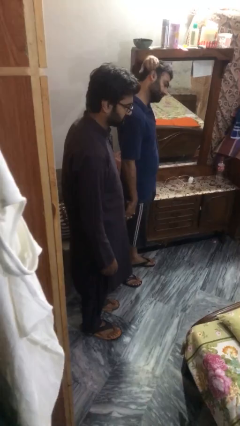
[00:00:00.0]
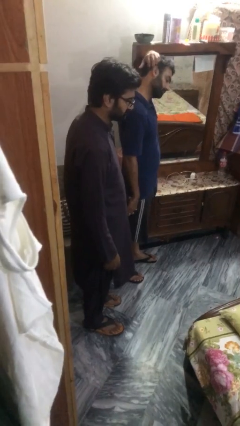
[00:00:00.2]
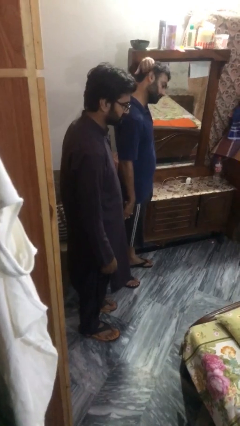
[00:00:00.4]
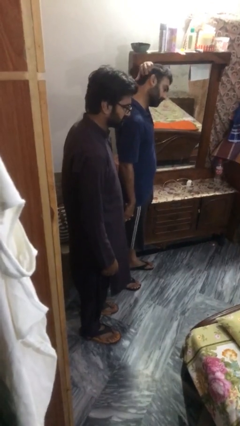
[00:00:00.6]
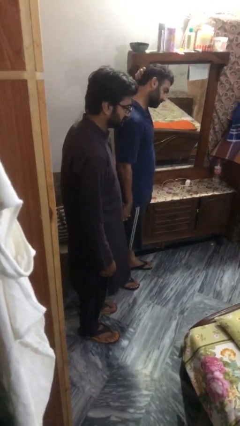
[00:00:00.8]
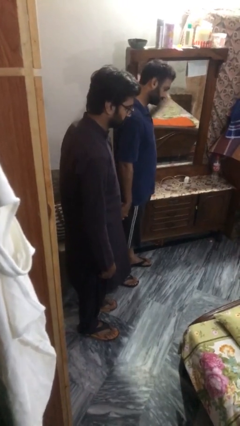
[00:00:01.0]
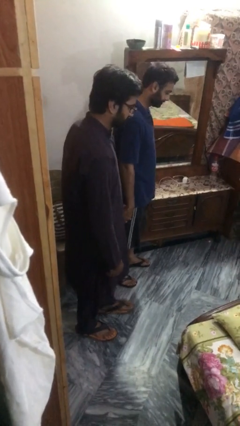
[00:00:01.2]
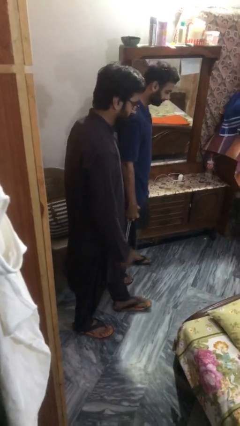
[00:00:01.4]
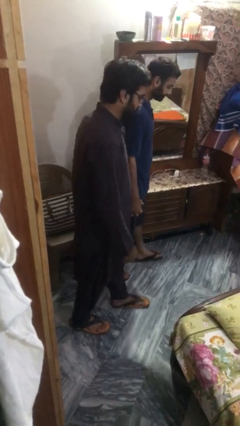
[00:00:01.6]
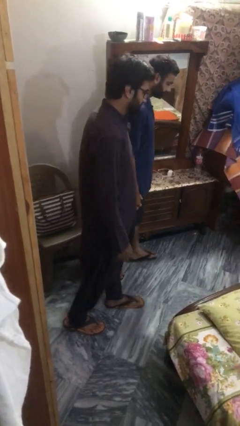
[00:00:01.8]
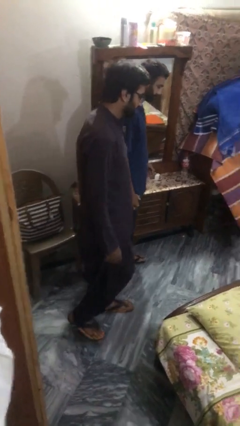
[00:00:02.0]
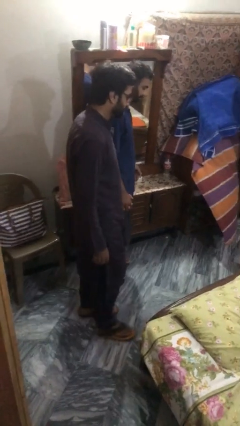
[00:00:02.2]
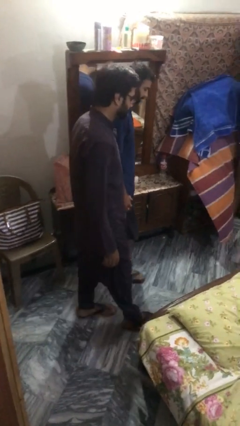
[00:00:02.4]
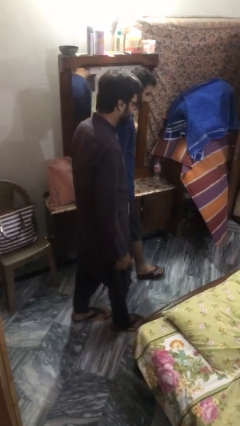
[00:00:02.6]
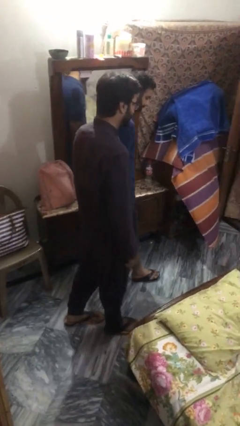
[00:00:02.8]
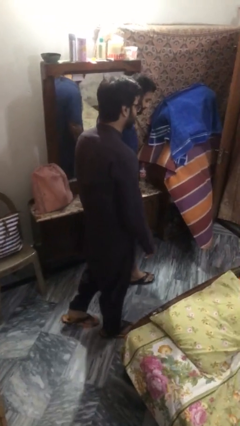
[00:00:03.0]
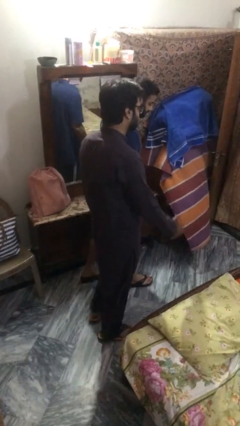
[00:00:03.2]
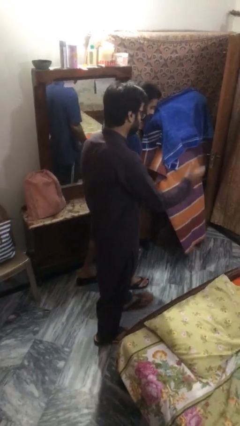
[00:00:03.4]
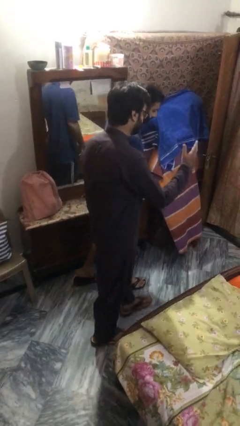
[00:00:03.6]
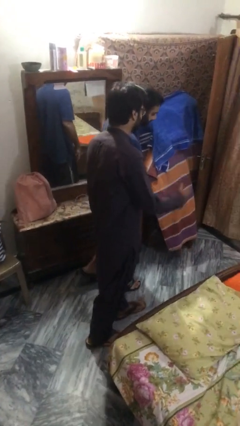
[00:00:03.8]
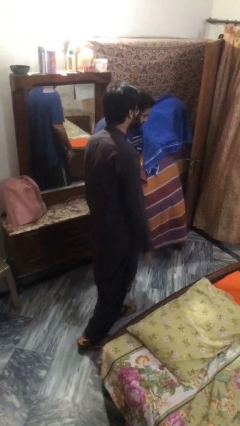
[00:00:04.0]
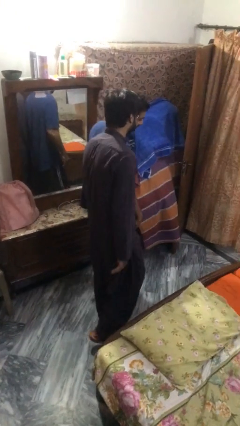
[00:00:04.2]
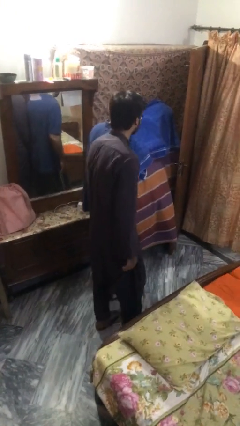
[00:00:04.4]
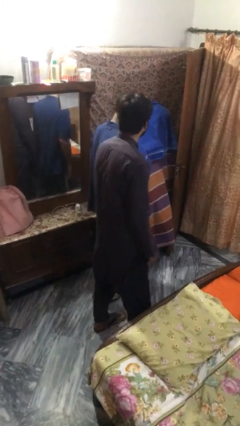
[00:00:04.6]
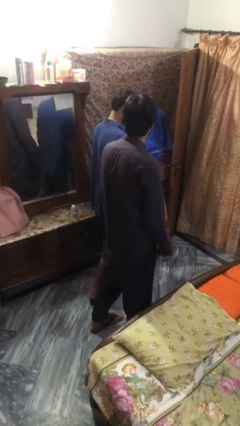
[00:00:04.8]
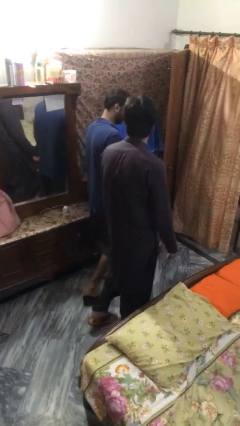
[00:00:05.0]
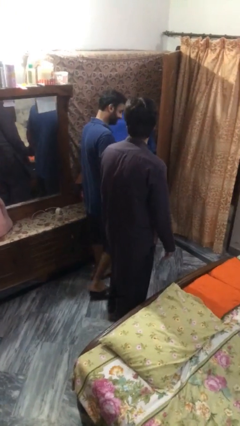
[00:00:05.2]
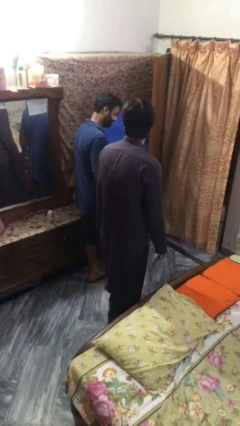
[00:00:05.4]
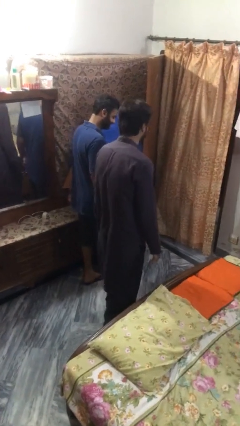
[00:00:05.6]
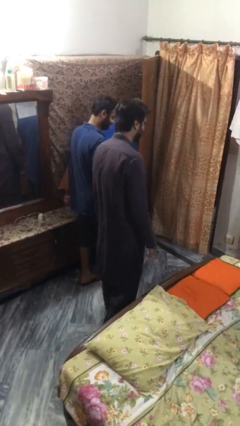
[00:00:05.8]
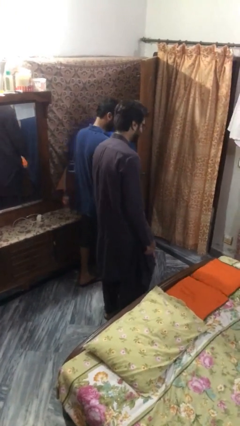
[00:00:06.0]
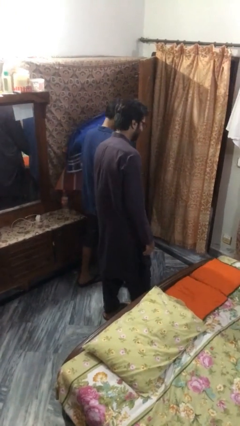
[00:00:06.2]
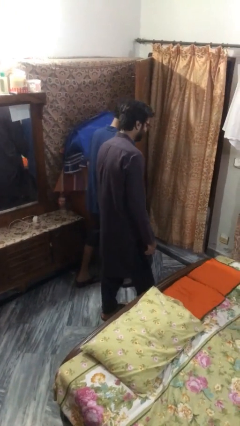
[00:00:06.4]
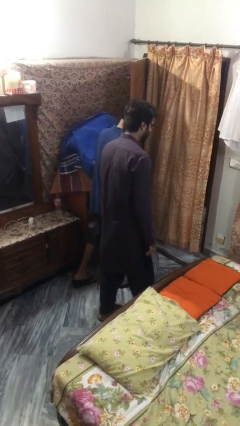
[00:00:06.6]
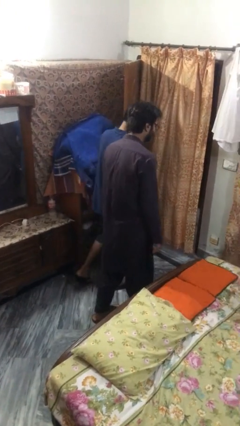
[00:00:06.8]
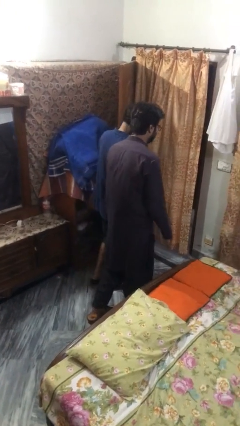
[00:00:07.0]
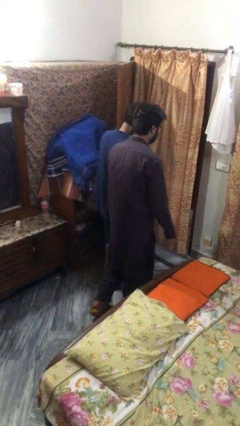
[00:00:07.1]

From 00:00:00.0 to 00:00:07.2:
person holds hand

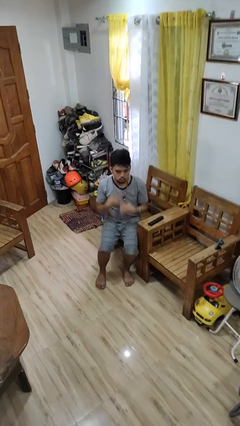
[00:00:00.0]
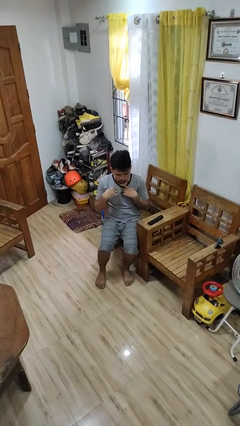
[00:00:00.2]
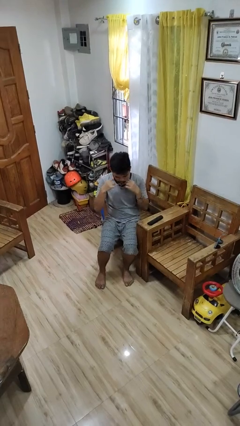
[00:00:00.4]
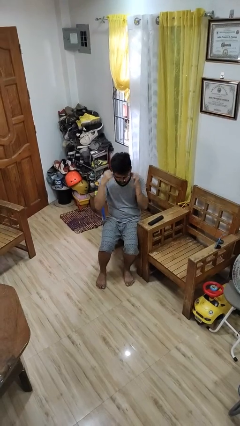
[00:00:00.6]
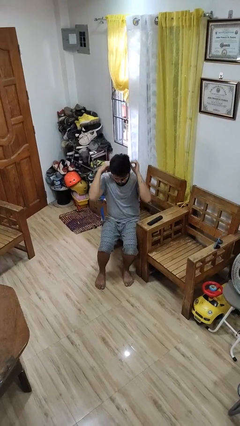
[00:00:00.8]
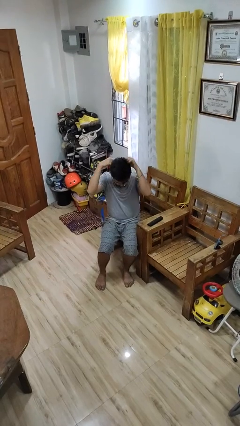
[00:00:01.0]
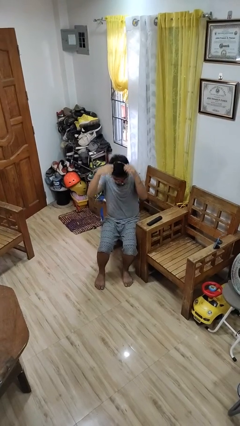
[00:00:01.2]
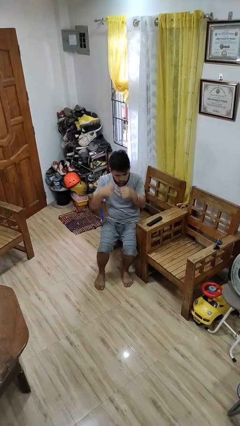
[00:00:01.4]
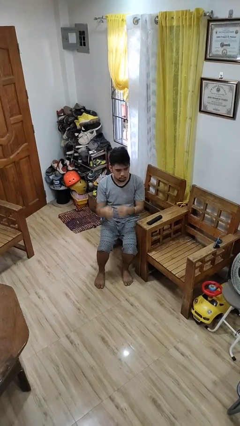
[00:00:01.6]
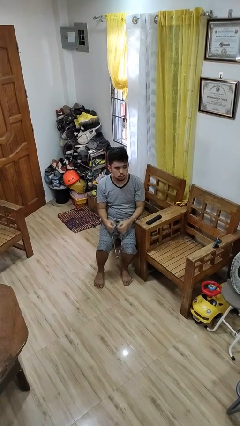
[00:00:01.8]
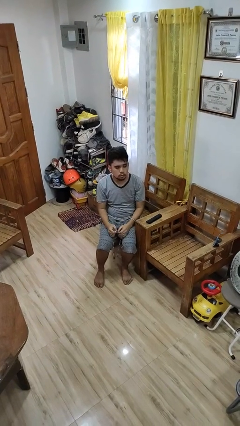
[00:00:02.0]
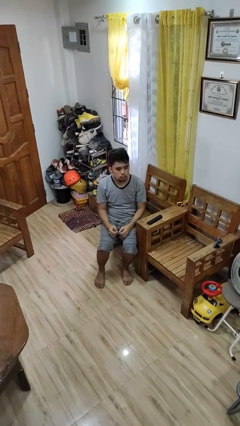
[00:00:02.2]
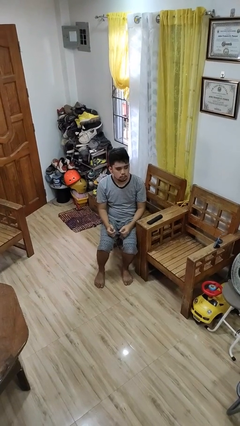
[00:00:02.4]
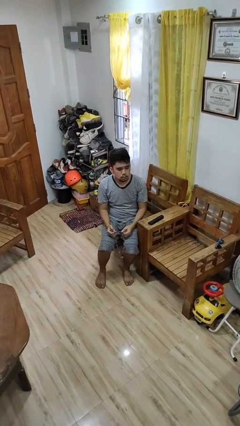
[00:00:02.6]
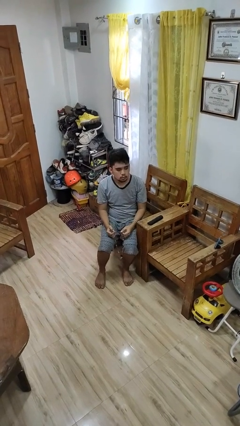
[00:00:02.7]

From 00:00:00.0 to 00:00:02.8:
person takes off necklace

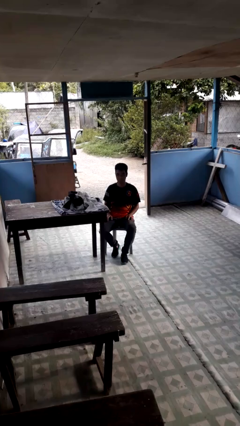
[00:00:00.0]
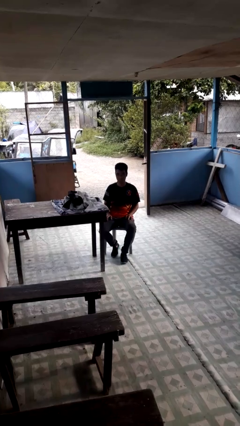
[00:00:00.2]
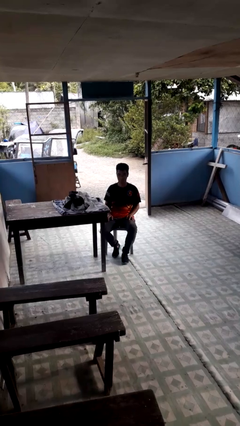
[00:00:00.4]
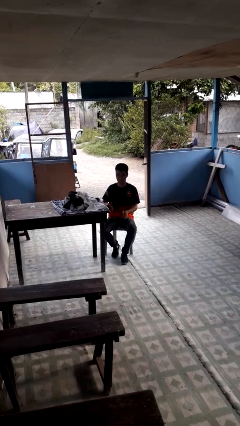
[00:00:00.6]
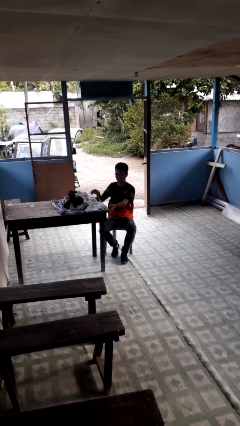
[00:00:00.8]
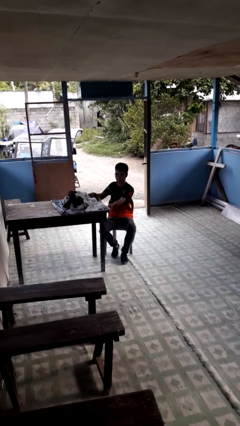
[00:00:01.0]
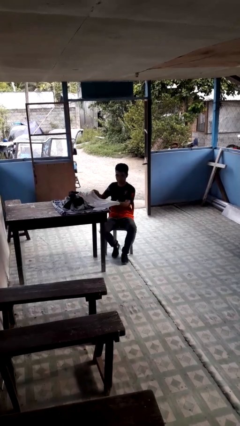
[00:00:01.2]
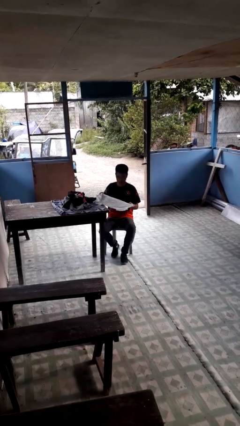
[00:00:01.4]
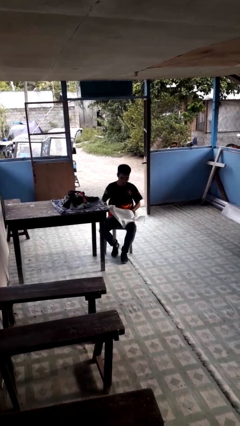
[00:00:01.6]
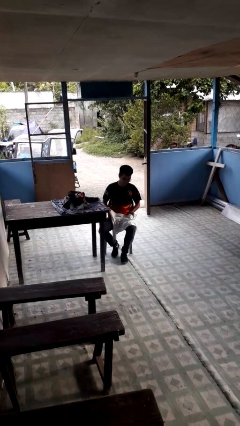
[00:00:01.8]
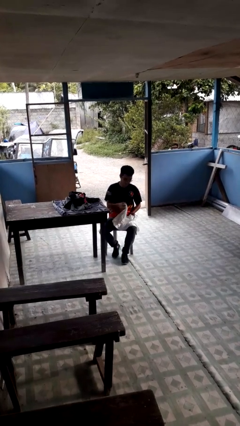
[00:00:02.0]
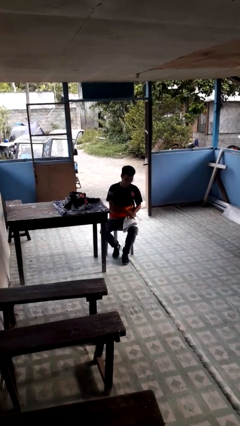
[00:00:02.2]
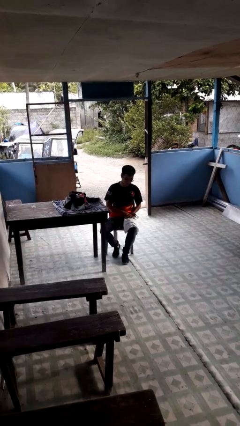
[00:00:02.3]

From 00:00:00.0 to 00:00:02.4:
person folds shirt

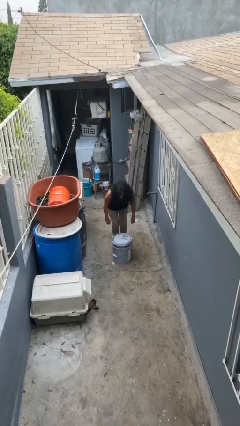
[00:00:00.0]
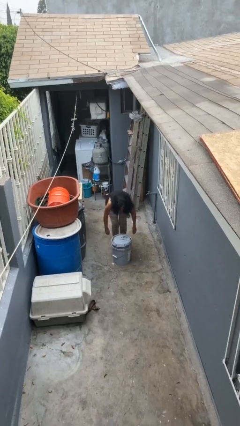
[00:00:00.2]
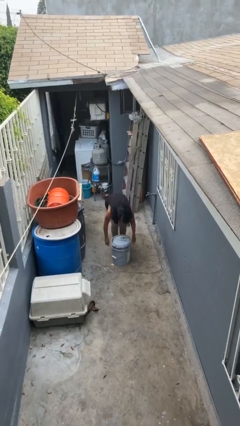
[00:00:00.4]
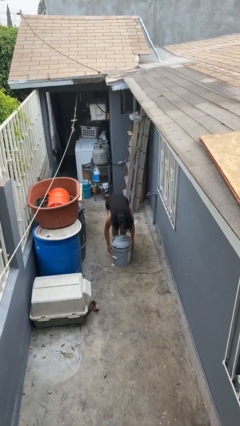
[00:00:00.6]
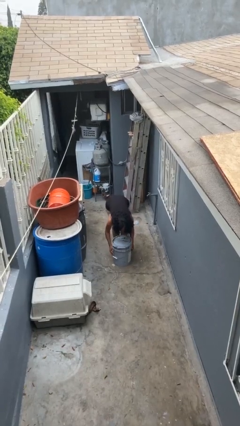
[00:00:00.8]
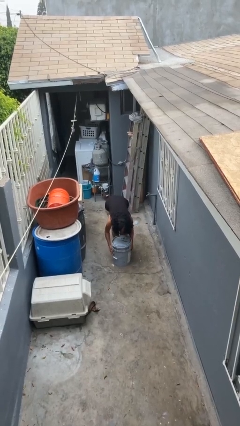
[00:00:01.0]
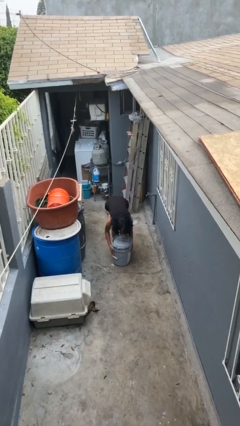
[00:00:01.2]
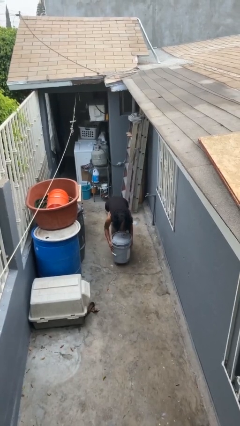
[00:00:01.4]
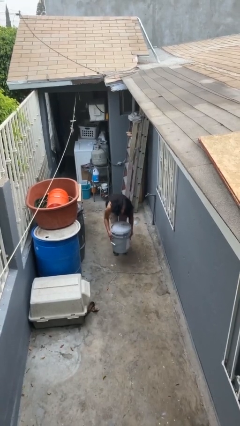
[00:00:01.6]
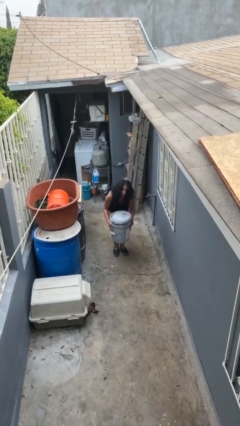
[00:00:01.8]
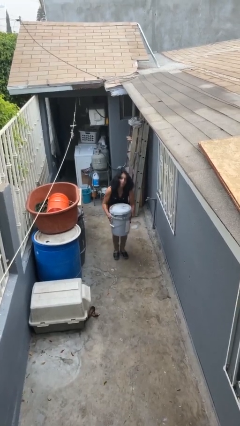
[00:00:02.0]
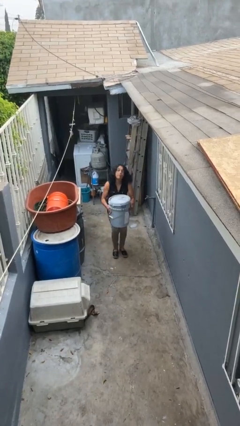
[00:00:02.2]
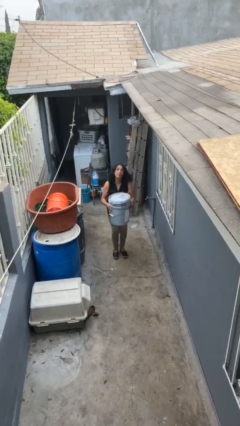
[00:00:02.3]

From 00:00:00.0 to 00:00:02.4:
person picks up object from floor

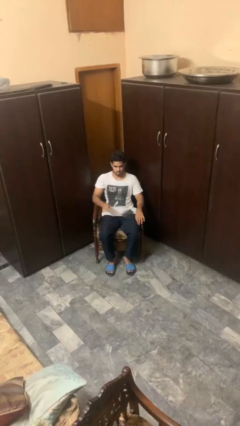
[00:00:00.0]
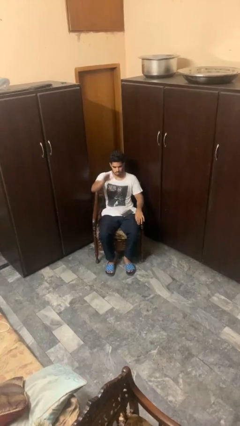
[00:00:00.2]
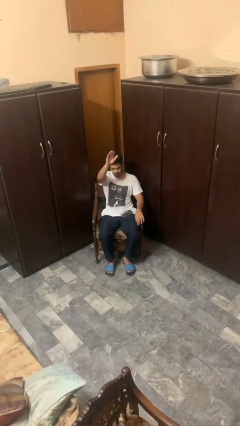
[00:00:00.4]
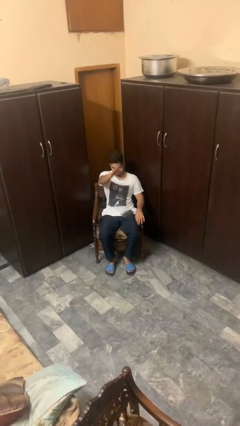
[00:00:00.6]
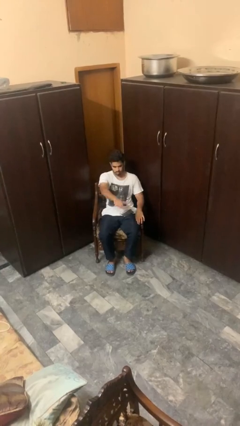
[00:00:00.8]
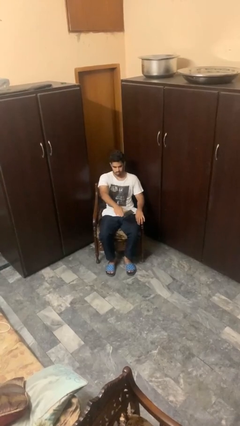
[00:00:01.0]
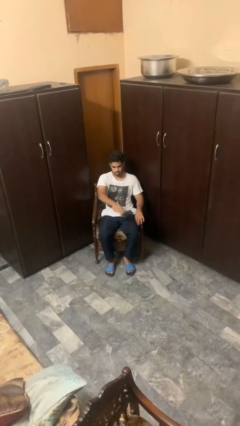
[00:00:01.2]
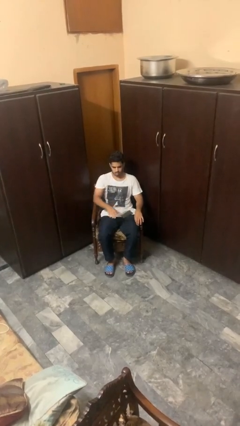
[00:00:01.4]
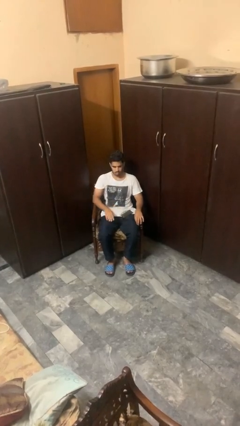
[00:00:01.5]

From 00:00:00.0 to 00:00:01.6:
person gestures swipe down

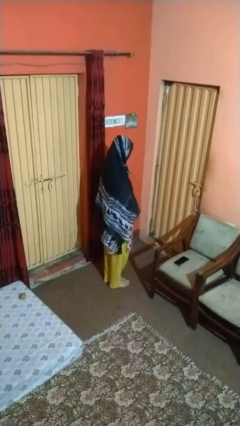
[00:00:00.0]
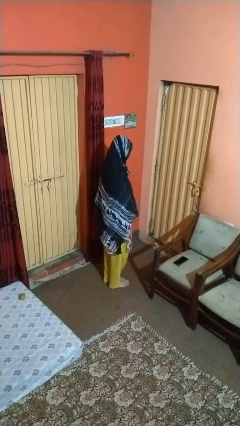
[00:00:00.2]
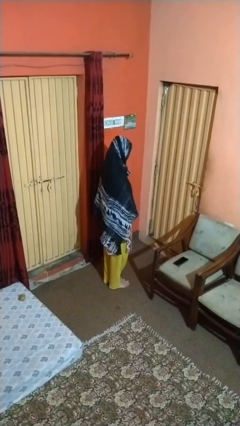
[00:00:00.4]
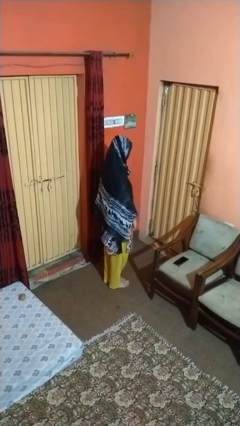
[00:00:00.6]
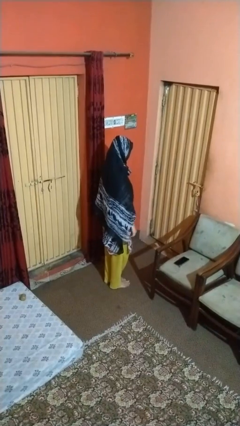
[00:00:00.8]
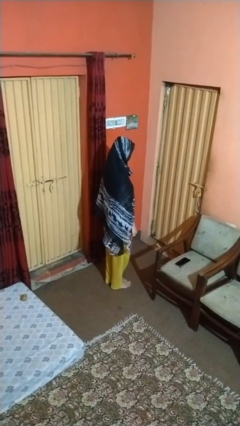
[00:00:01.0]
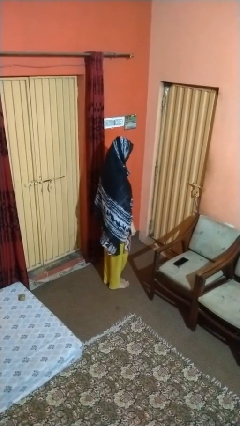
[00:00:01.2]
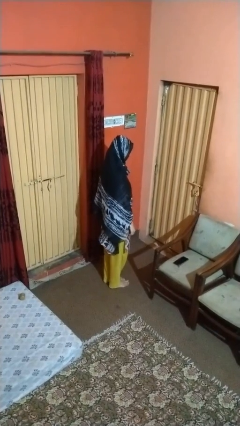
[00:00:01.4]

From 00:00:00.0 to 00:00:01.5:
person takes off wristwatch
